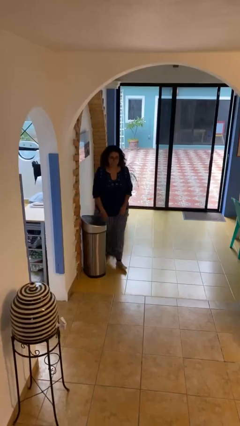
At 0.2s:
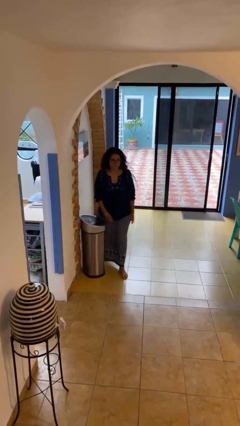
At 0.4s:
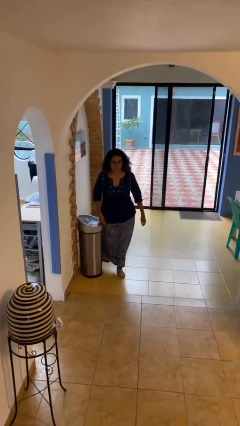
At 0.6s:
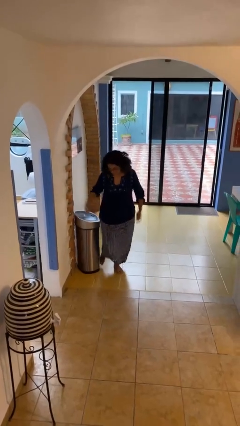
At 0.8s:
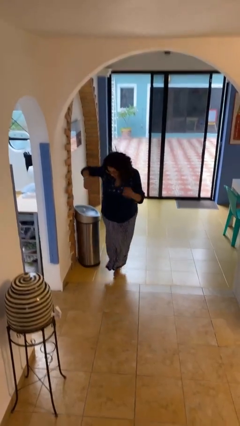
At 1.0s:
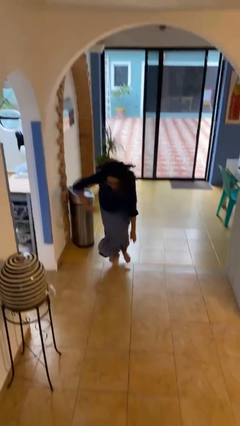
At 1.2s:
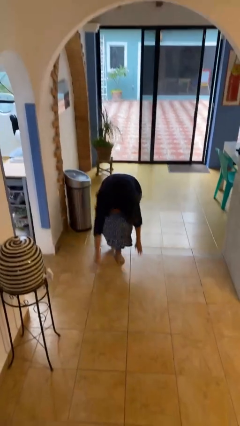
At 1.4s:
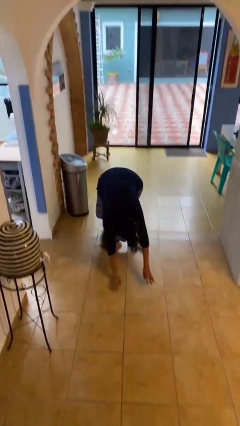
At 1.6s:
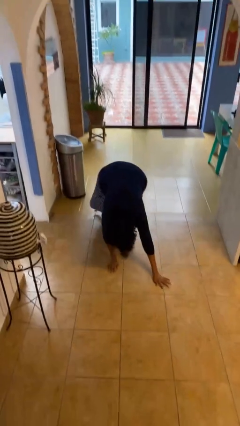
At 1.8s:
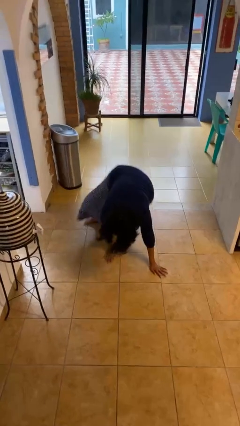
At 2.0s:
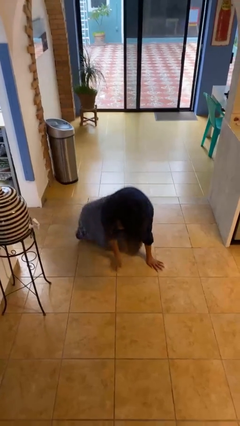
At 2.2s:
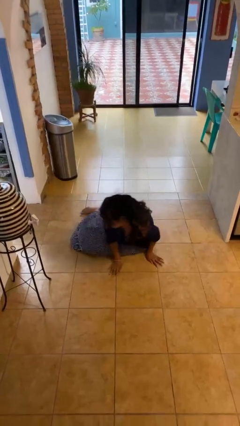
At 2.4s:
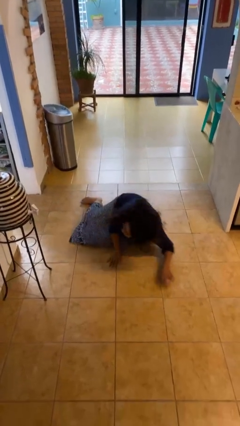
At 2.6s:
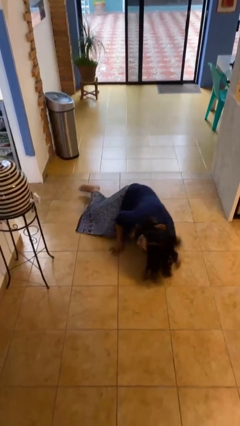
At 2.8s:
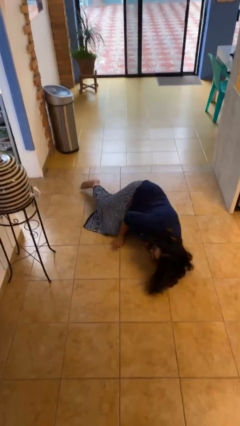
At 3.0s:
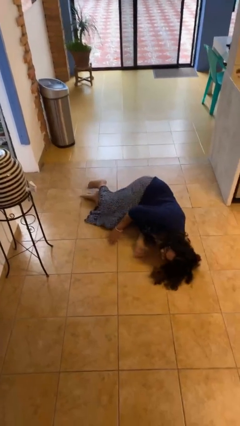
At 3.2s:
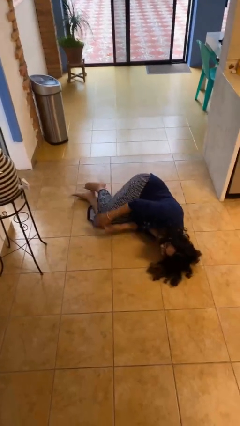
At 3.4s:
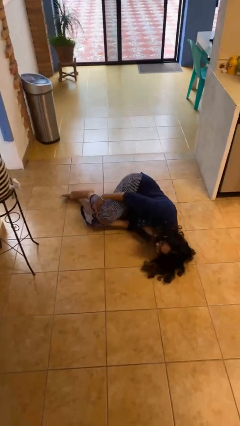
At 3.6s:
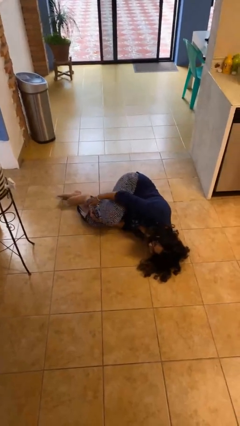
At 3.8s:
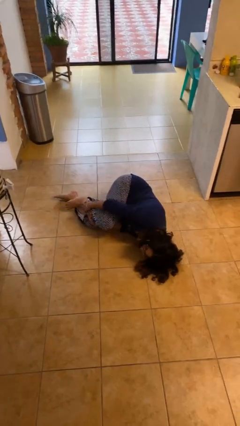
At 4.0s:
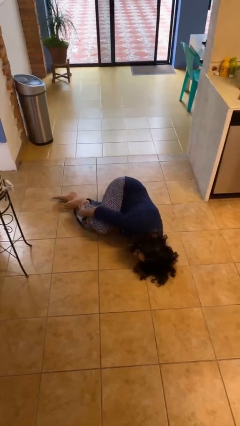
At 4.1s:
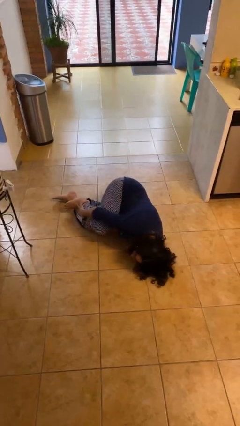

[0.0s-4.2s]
person trips on object on floor

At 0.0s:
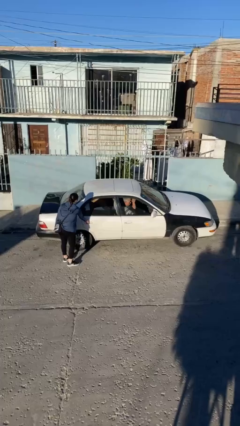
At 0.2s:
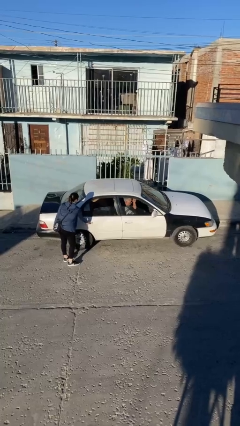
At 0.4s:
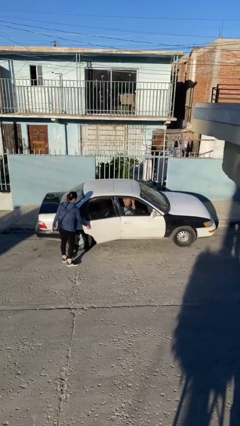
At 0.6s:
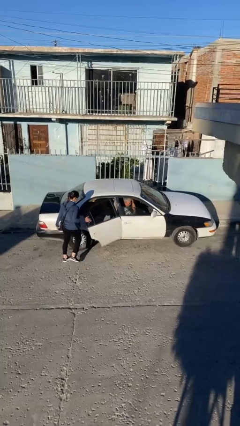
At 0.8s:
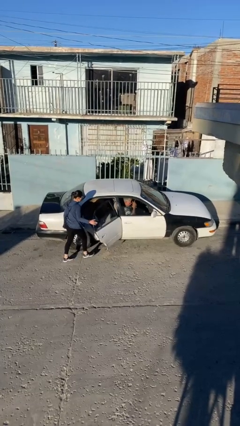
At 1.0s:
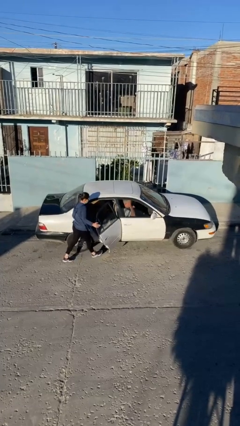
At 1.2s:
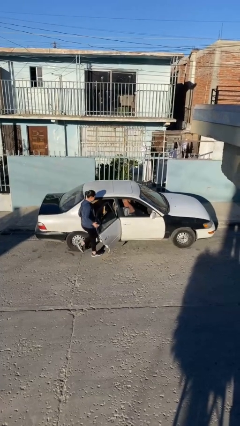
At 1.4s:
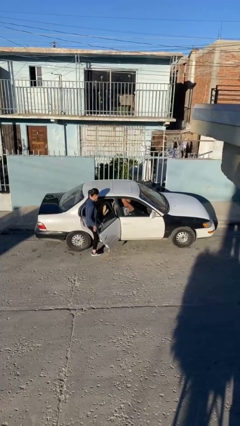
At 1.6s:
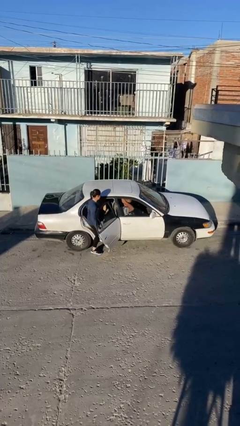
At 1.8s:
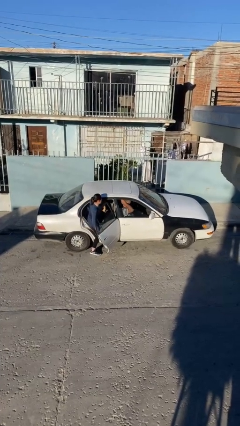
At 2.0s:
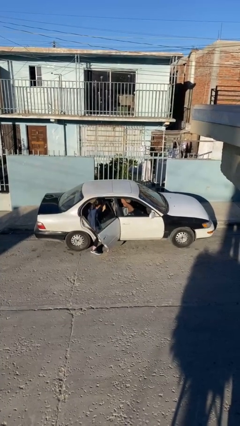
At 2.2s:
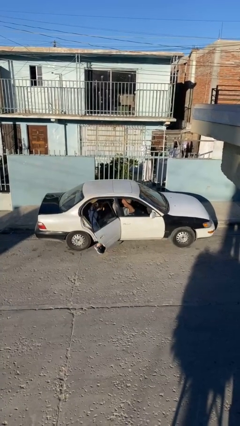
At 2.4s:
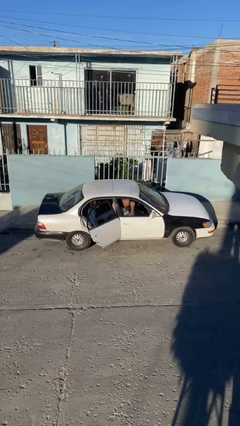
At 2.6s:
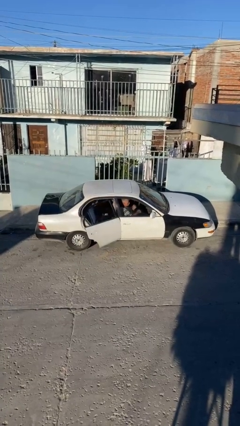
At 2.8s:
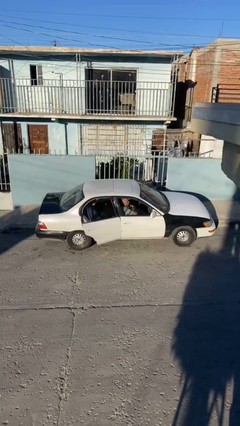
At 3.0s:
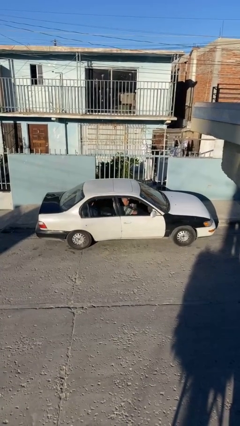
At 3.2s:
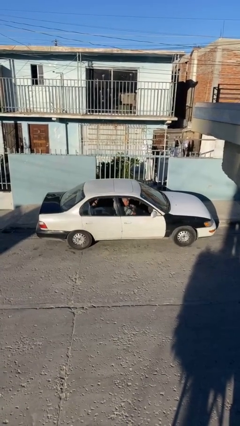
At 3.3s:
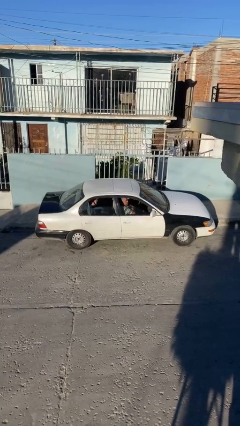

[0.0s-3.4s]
car picks up person

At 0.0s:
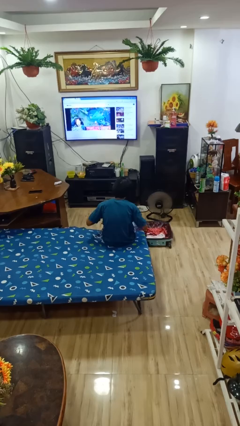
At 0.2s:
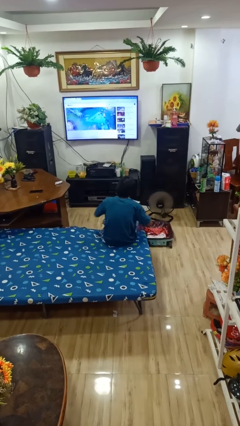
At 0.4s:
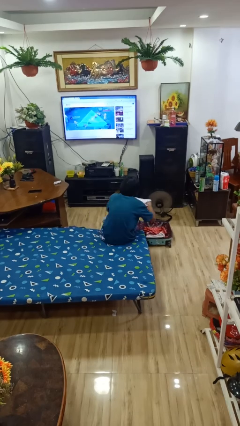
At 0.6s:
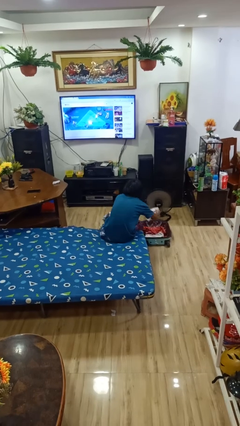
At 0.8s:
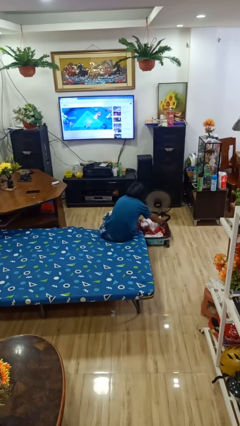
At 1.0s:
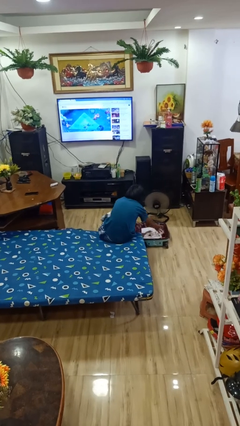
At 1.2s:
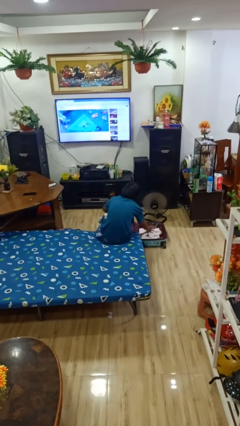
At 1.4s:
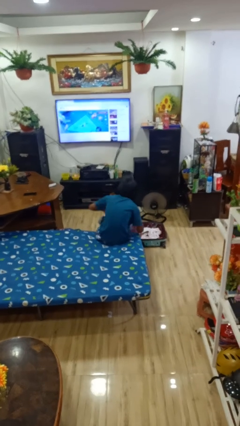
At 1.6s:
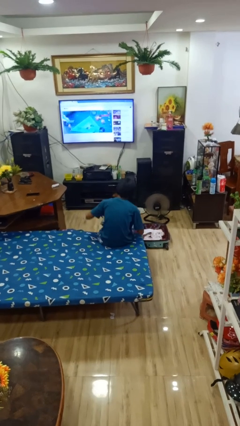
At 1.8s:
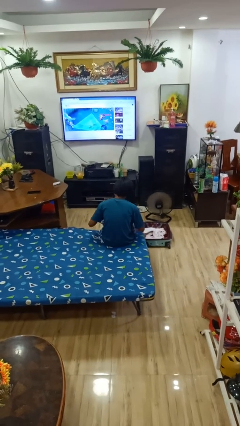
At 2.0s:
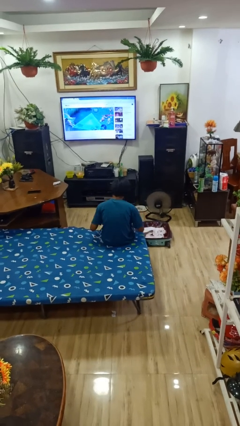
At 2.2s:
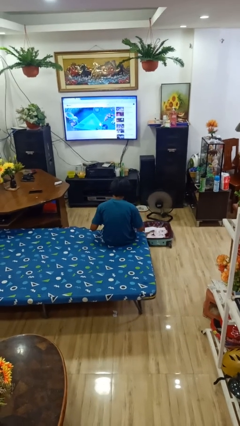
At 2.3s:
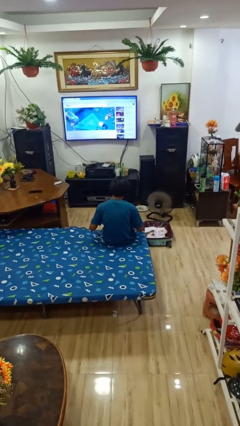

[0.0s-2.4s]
person loads clothes into suitcase

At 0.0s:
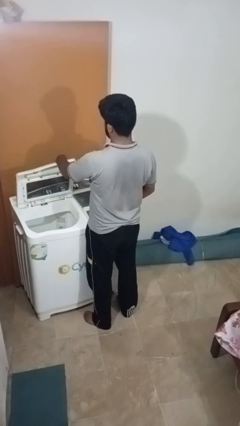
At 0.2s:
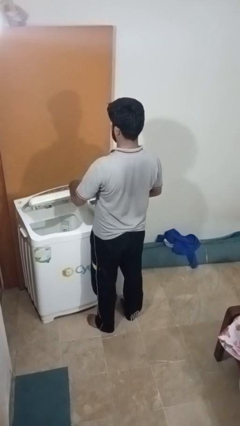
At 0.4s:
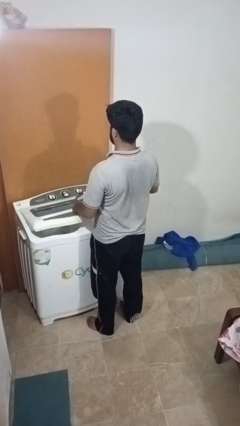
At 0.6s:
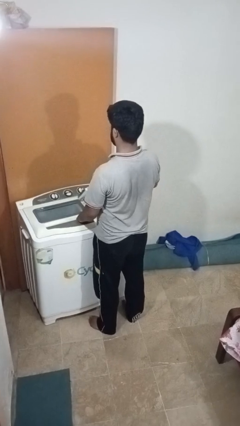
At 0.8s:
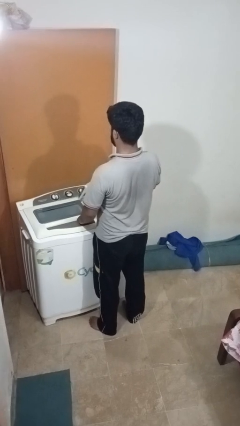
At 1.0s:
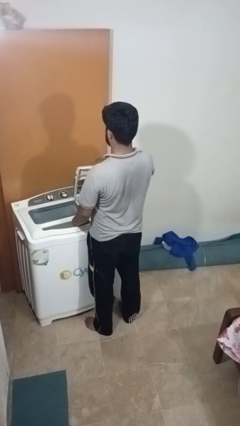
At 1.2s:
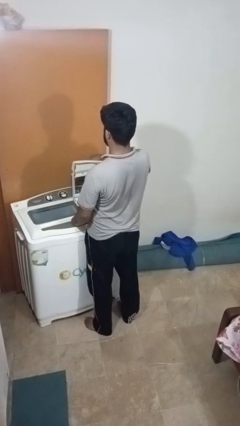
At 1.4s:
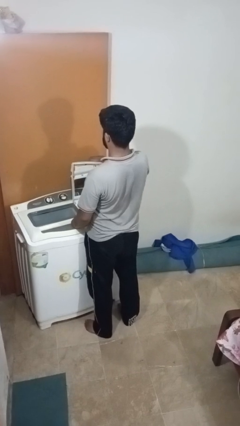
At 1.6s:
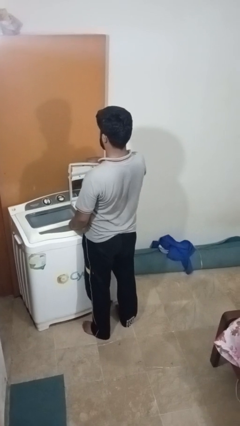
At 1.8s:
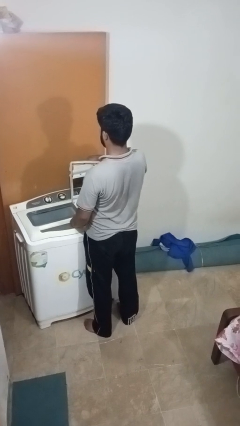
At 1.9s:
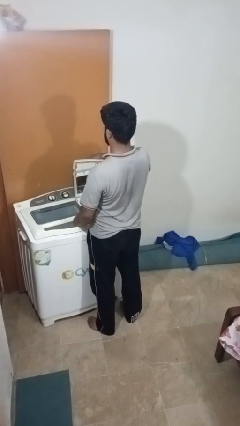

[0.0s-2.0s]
person closes clothes washer

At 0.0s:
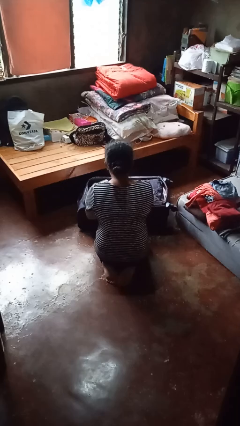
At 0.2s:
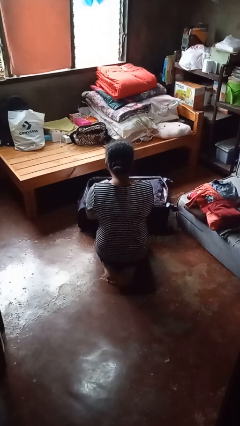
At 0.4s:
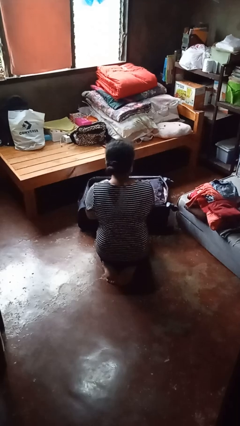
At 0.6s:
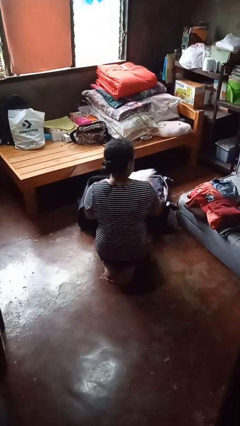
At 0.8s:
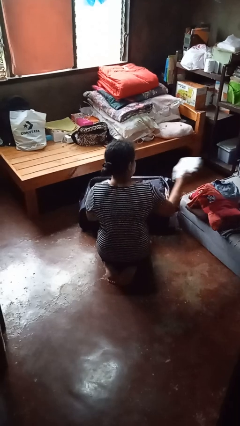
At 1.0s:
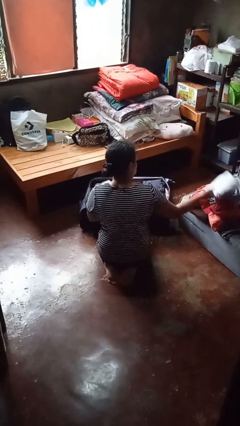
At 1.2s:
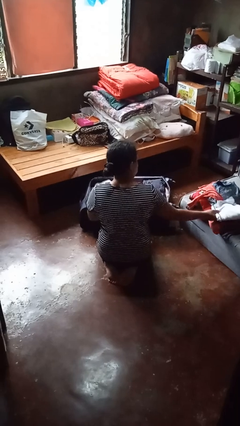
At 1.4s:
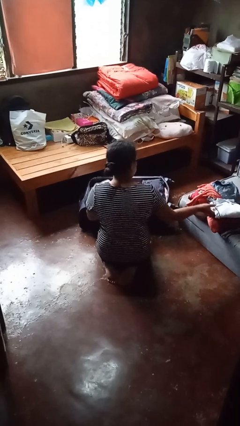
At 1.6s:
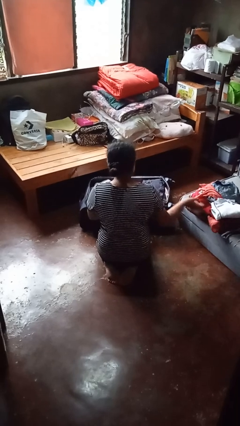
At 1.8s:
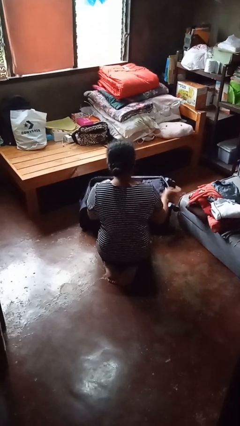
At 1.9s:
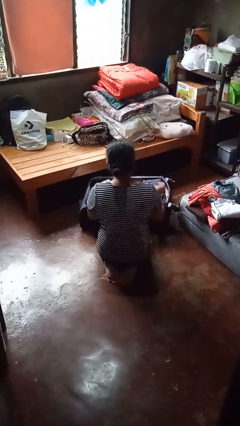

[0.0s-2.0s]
person unloads clothes from suitcase

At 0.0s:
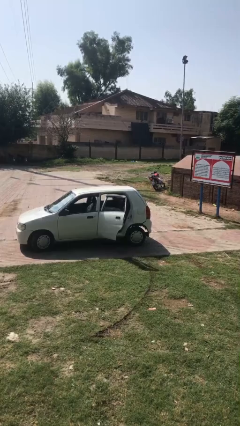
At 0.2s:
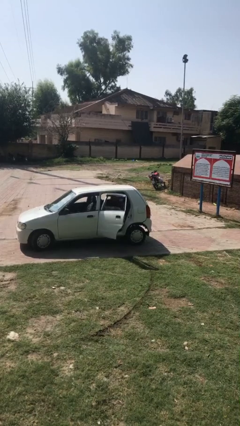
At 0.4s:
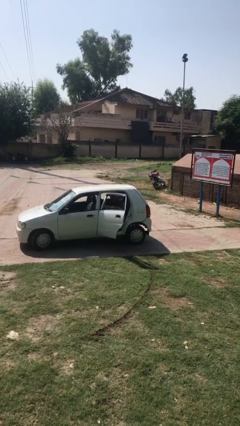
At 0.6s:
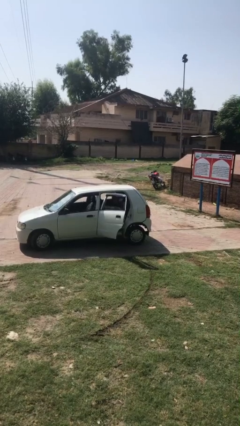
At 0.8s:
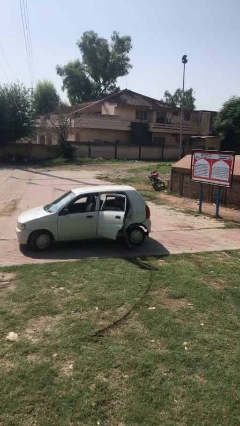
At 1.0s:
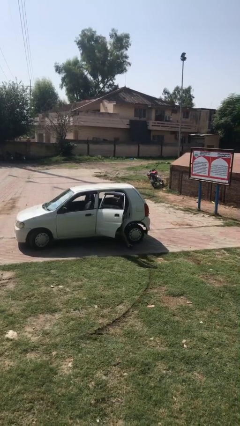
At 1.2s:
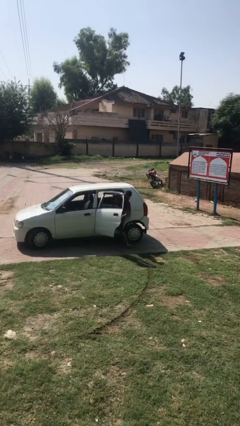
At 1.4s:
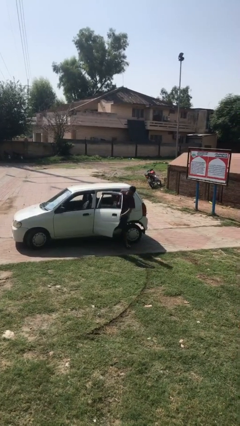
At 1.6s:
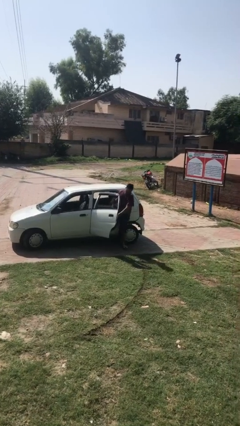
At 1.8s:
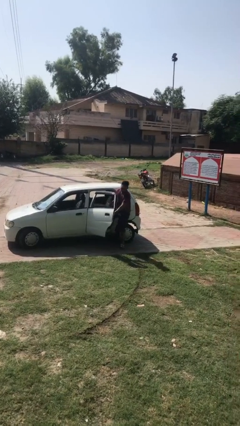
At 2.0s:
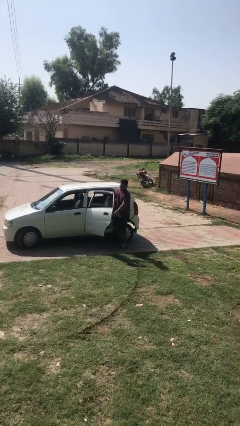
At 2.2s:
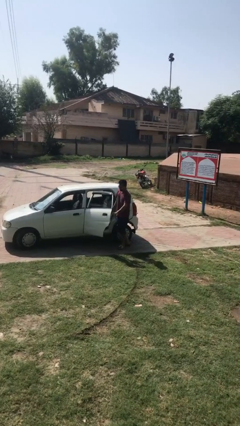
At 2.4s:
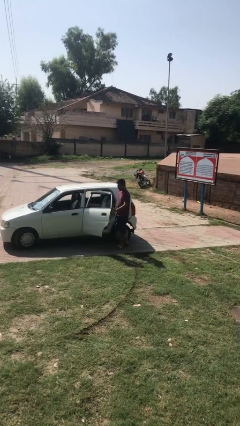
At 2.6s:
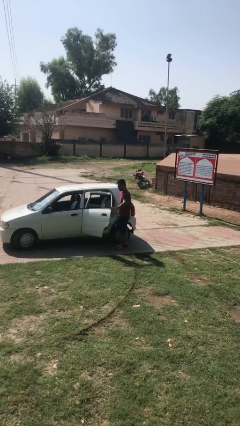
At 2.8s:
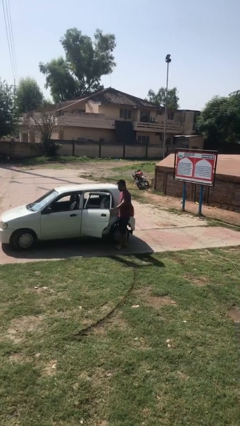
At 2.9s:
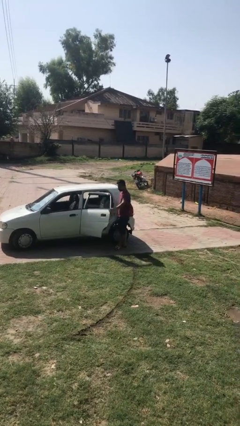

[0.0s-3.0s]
person exits car

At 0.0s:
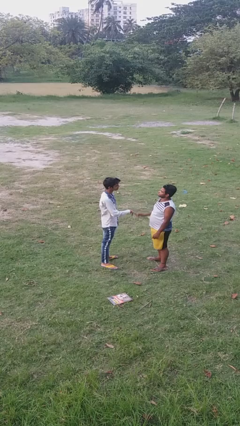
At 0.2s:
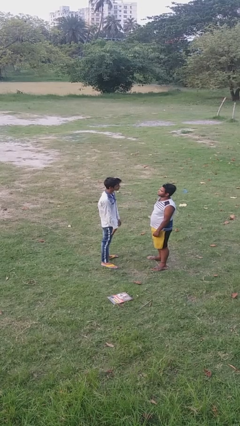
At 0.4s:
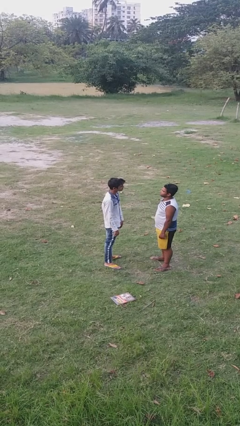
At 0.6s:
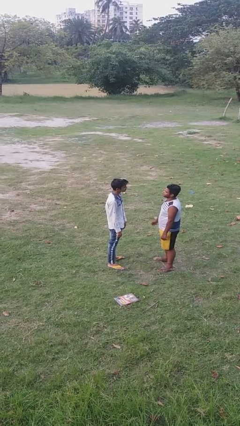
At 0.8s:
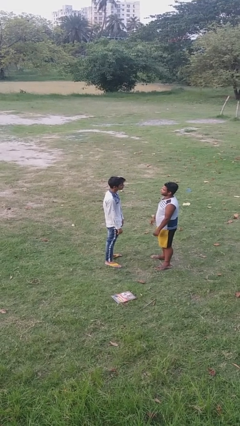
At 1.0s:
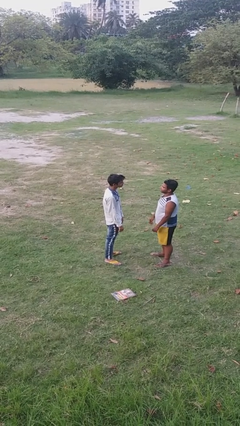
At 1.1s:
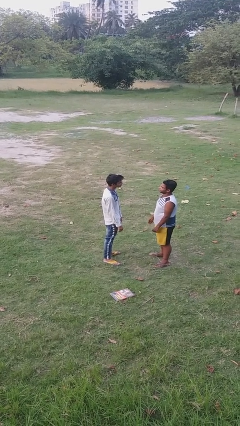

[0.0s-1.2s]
person highfives hand
